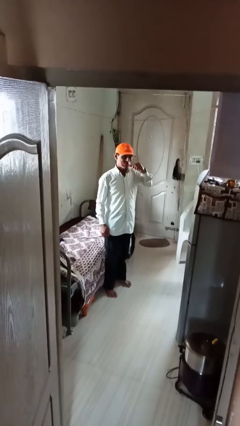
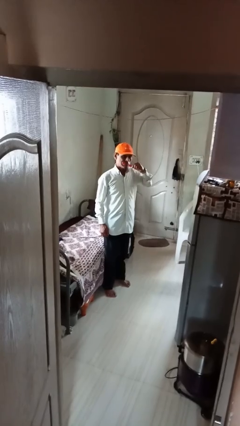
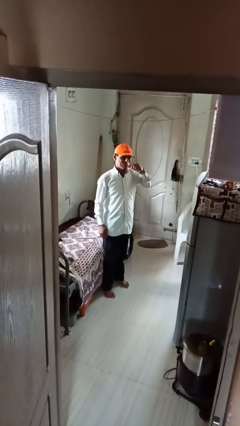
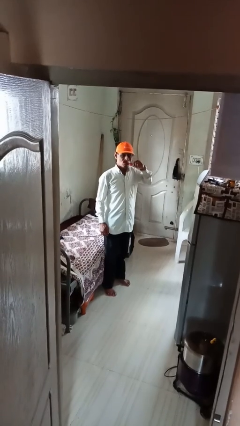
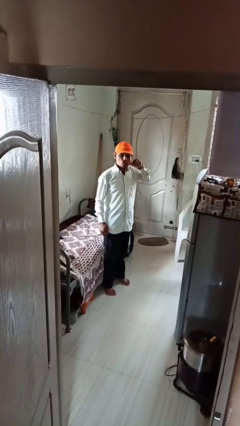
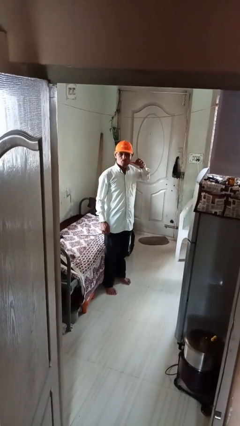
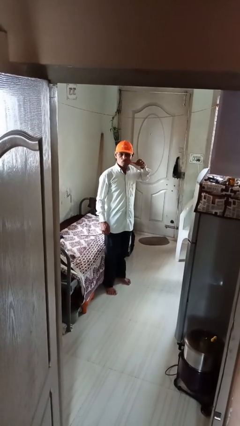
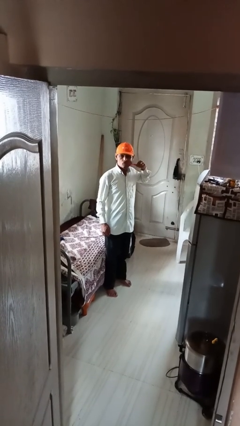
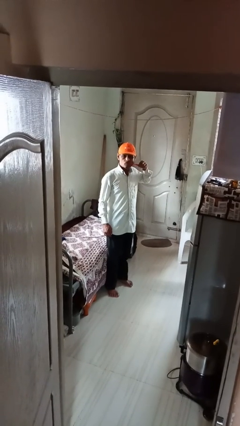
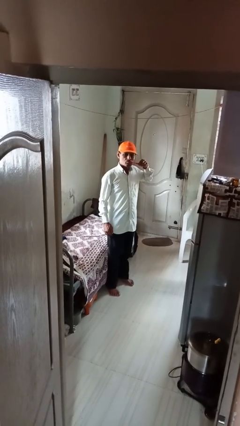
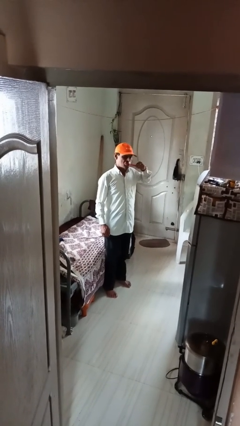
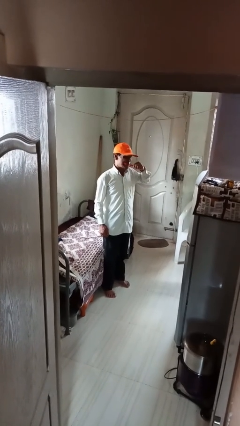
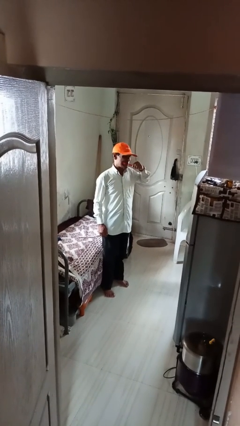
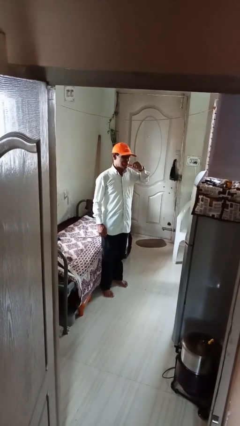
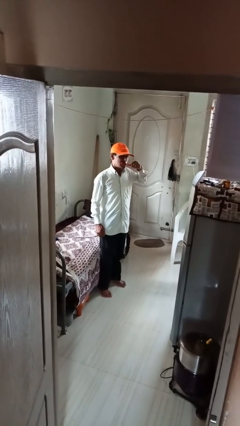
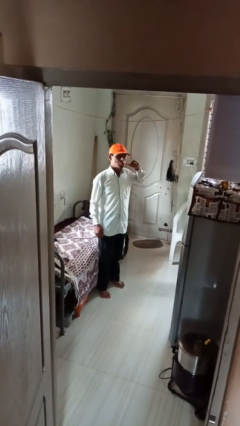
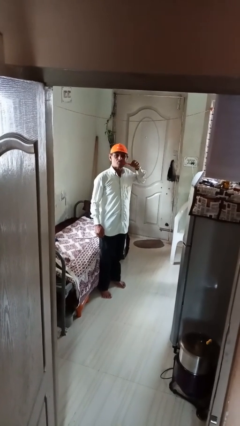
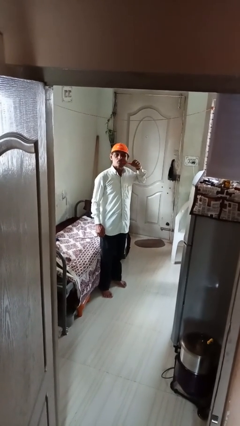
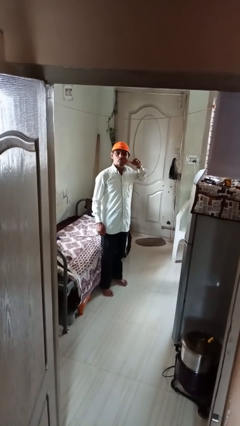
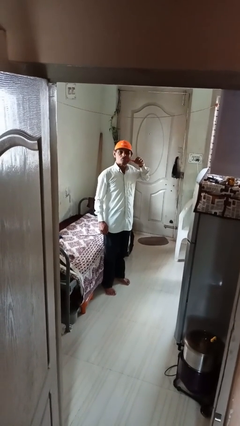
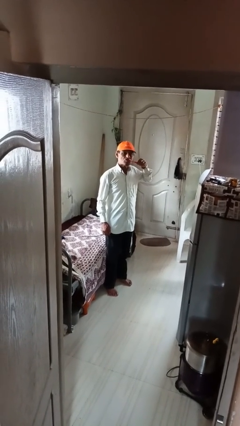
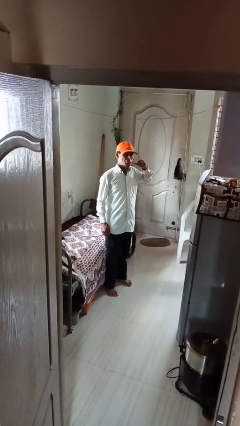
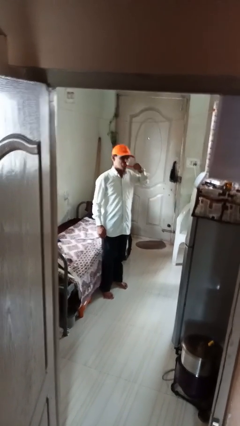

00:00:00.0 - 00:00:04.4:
person brushes teeth

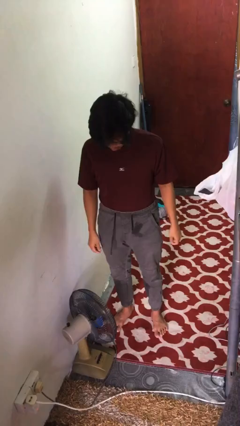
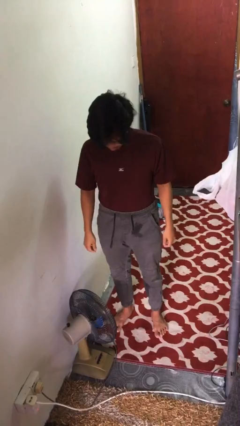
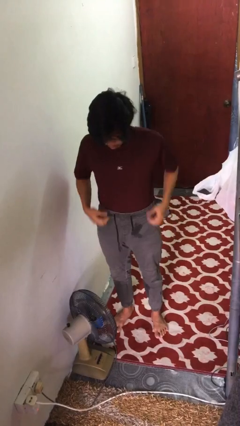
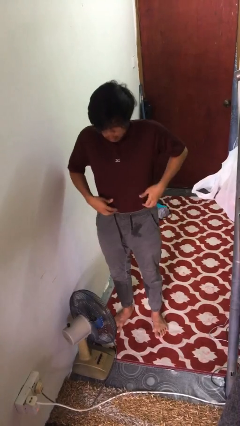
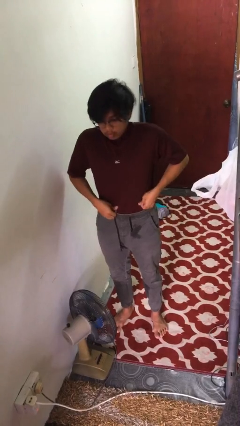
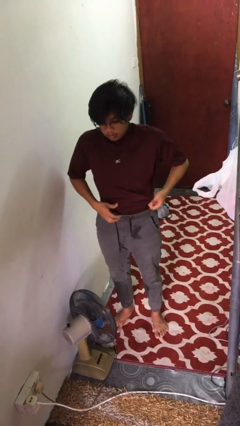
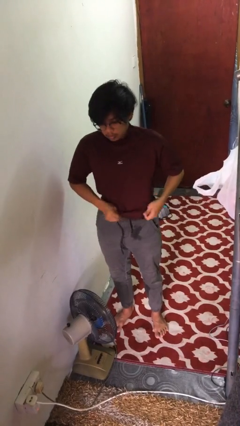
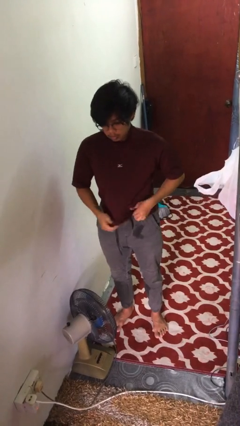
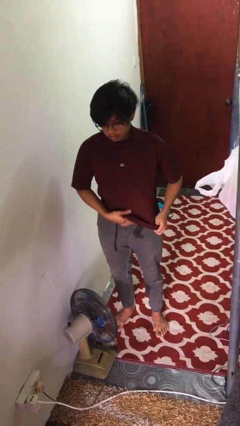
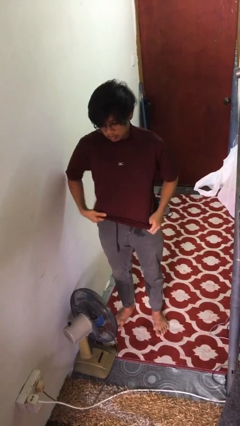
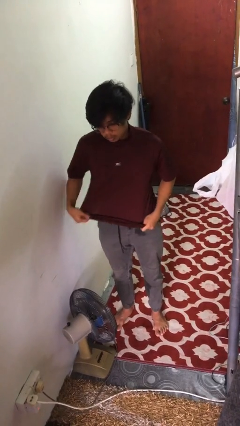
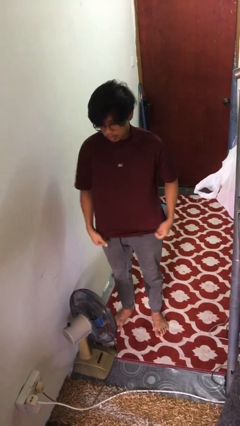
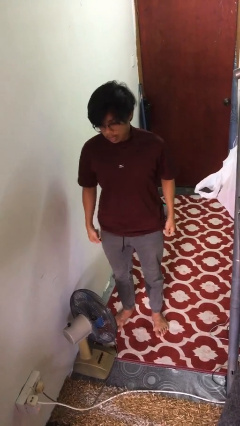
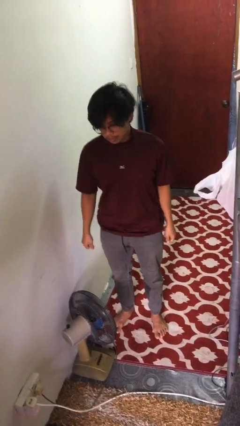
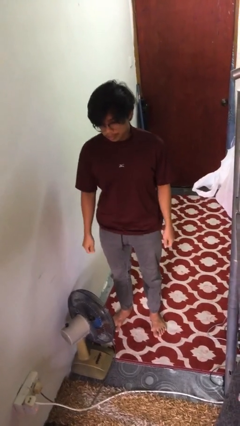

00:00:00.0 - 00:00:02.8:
person untucks shirt

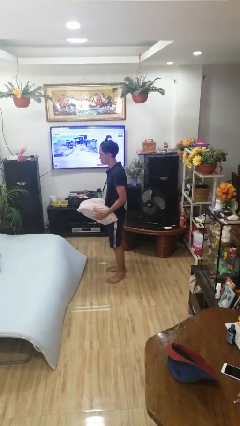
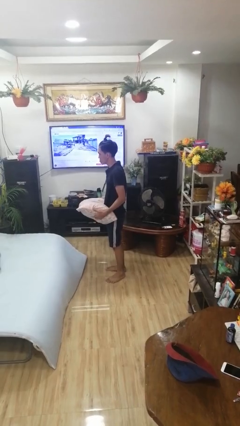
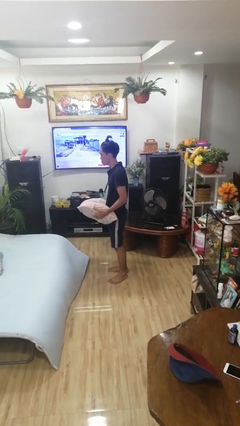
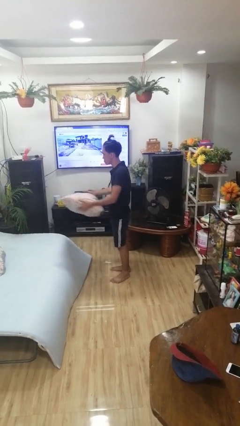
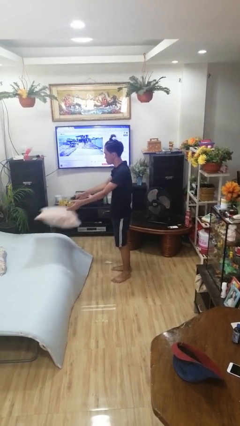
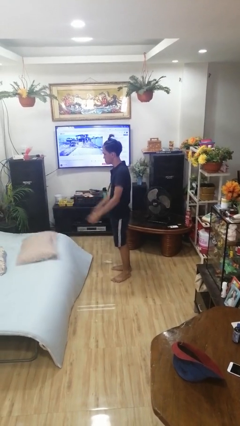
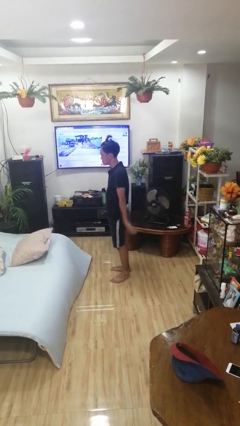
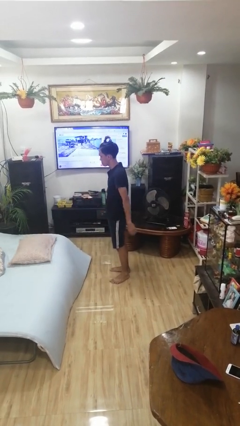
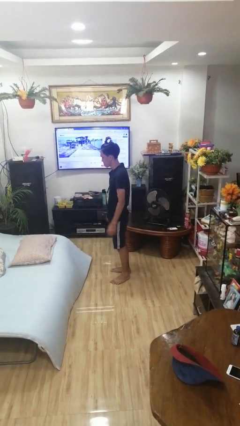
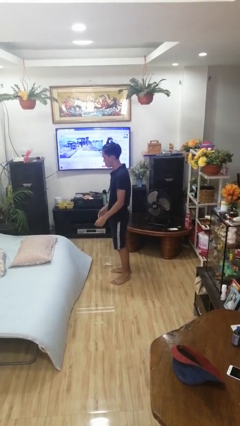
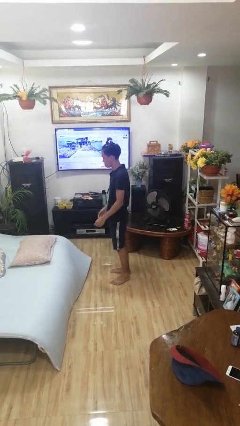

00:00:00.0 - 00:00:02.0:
person throws object on bed

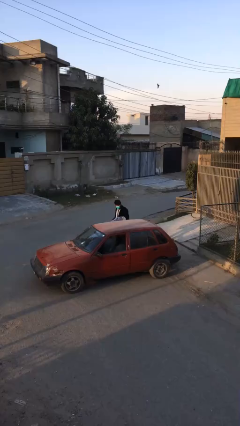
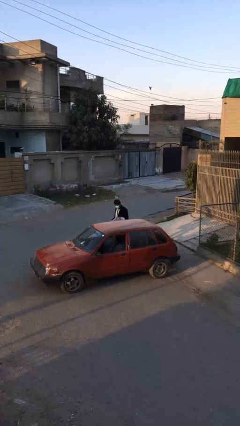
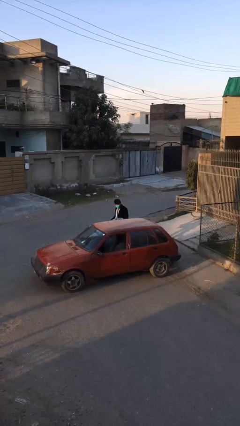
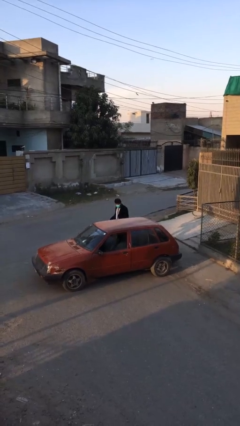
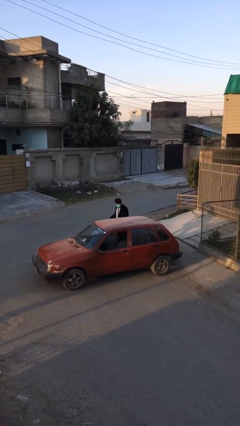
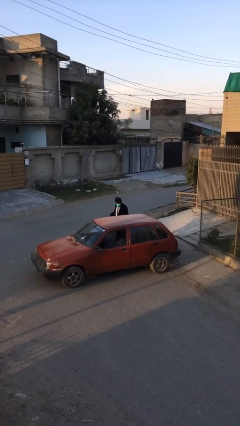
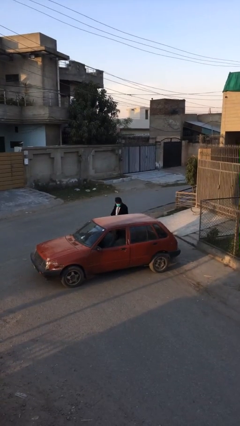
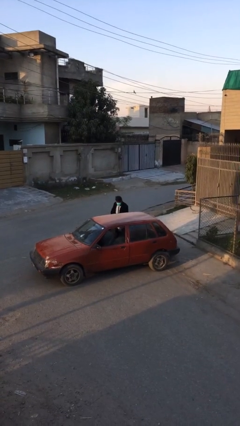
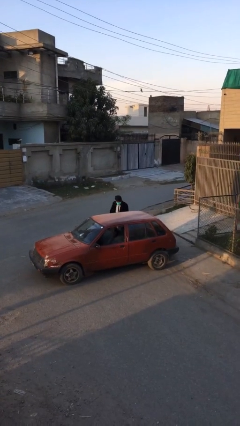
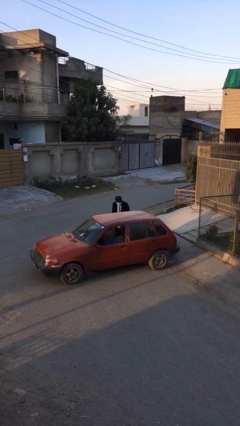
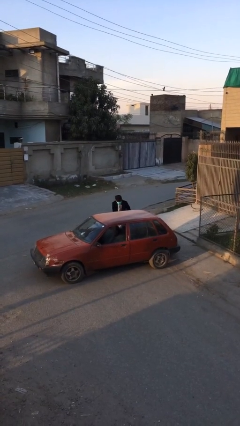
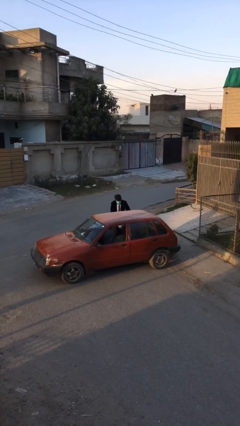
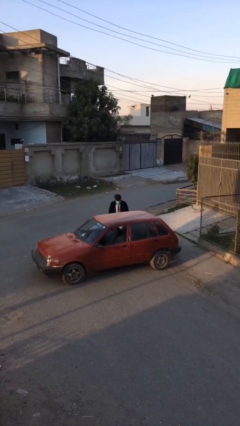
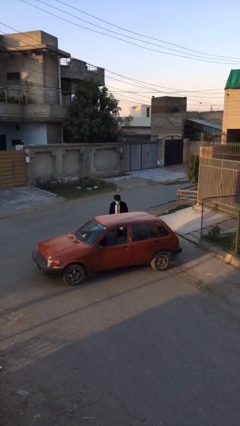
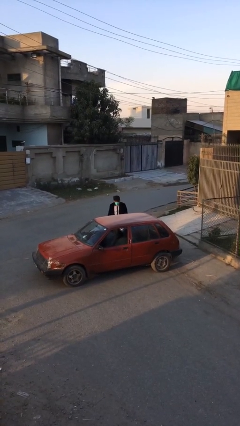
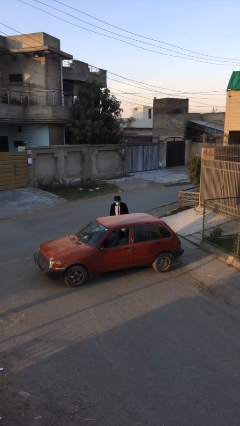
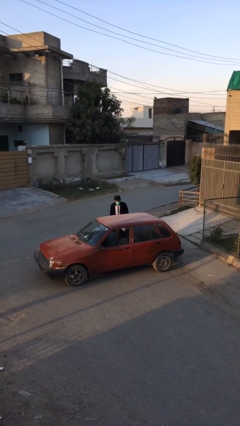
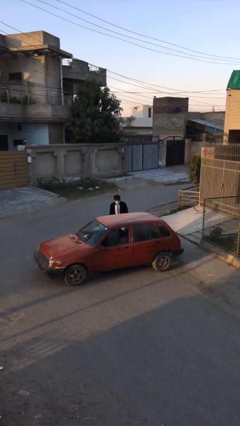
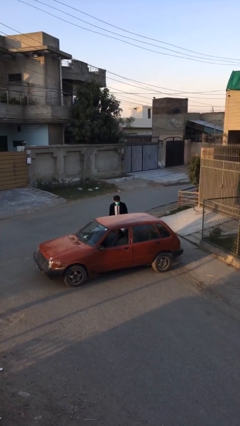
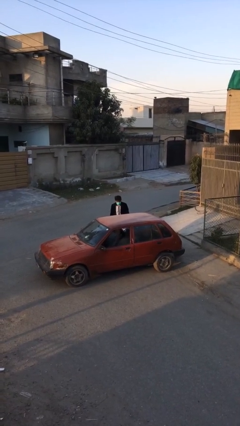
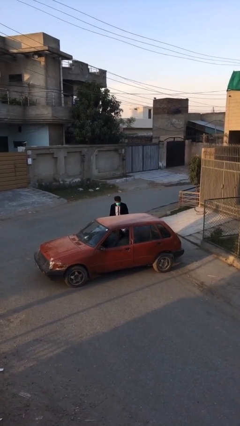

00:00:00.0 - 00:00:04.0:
person loads car

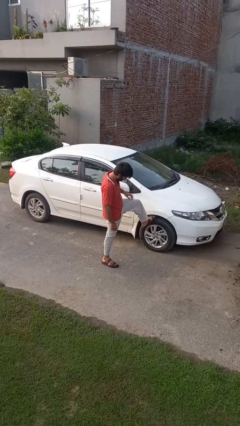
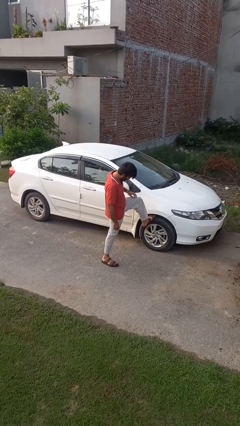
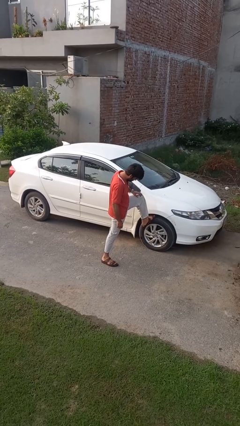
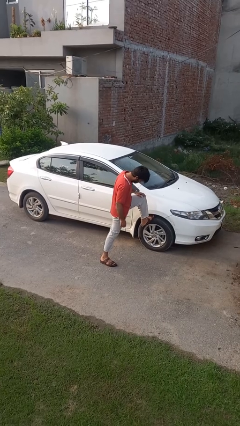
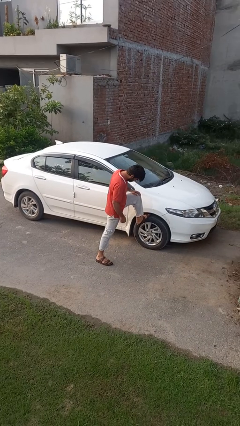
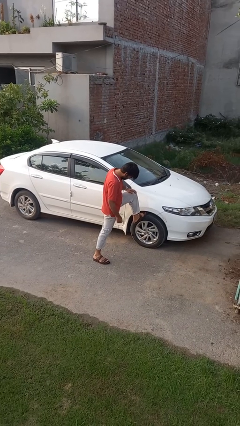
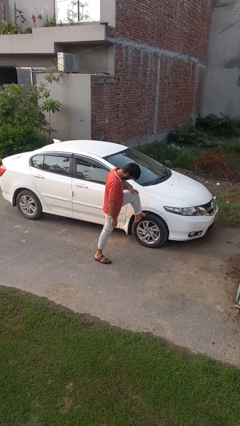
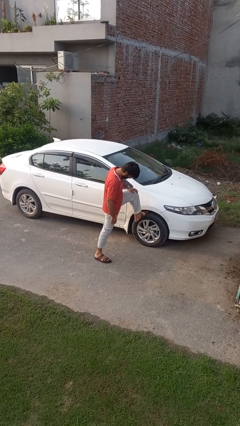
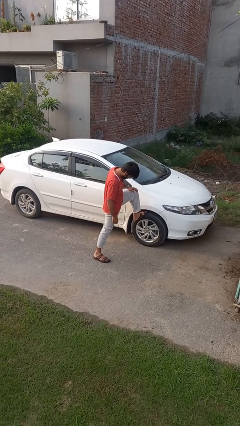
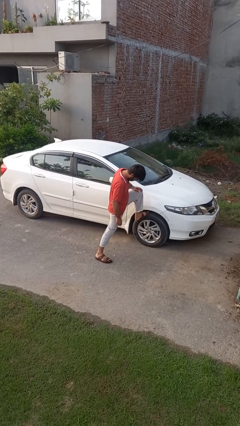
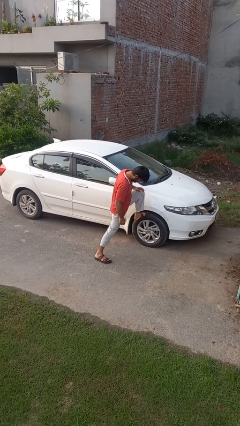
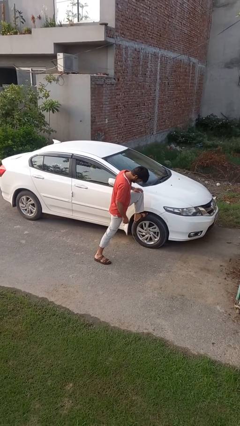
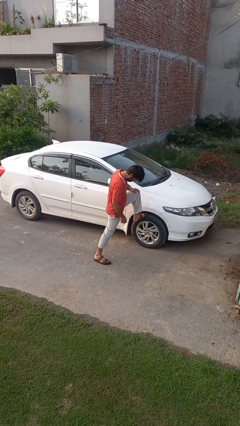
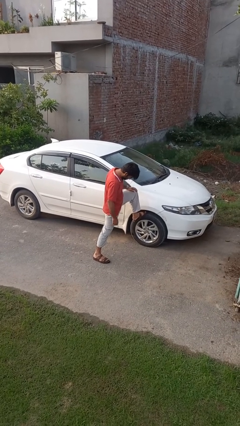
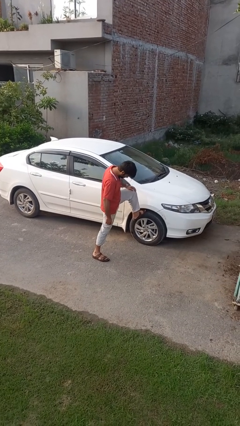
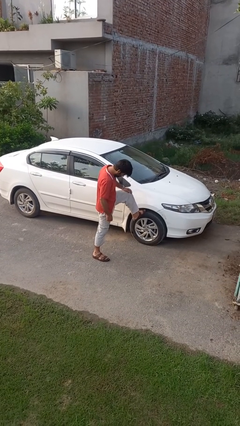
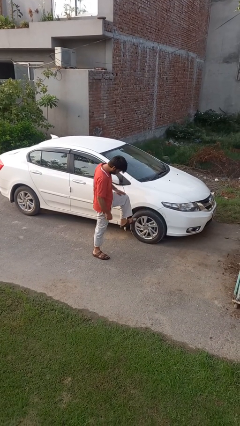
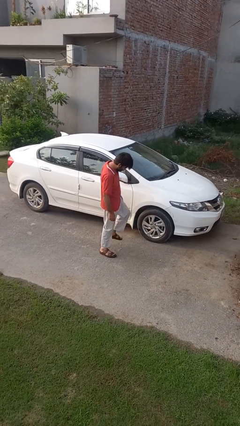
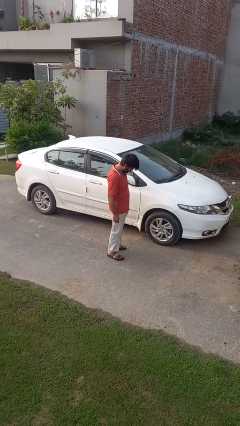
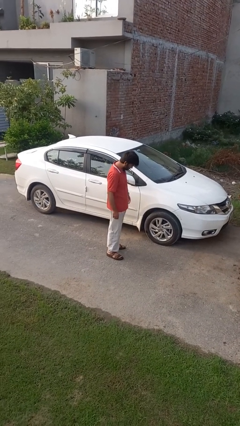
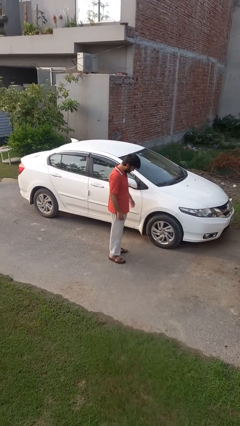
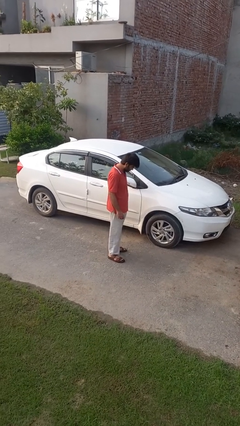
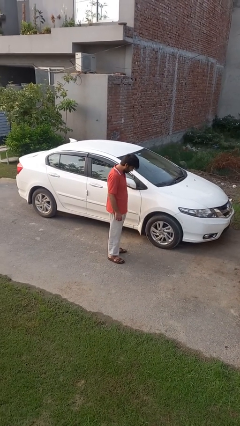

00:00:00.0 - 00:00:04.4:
person kicks car tires
